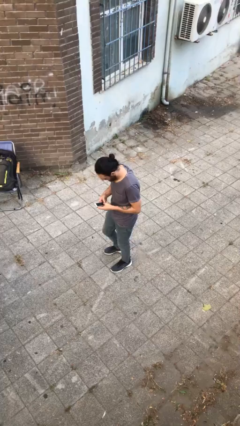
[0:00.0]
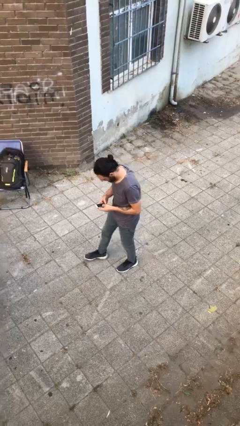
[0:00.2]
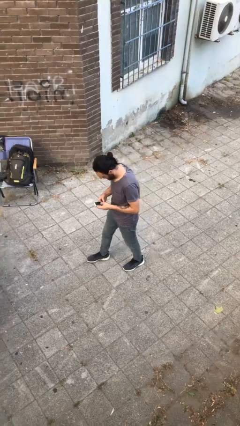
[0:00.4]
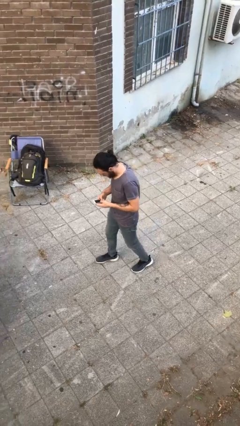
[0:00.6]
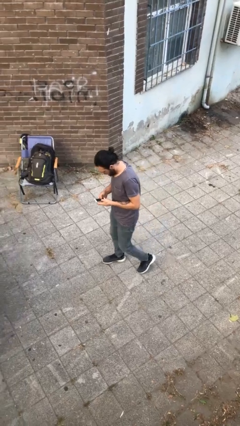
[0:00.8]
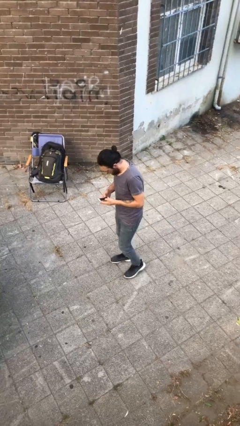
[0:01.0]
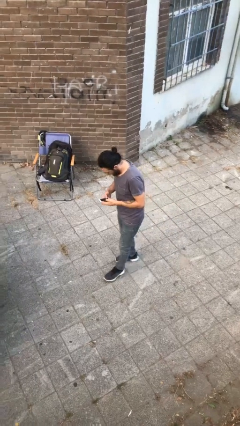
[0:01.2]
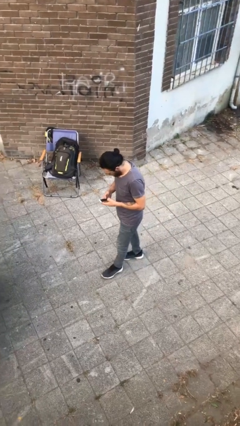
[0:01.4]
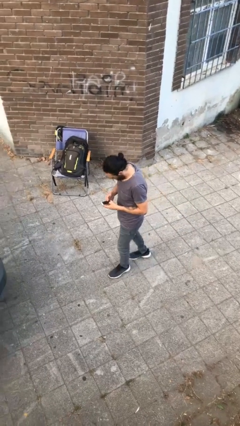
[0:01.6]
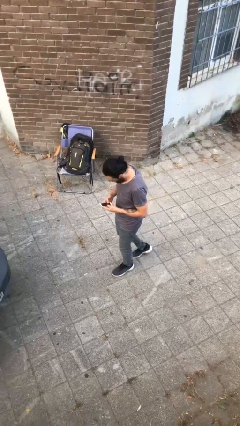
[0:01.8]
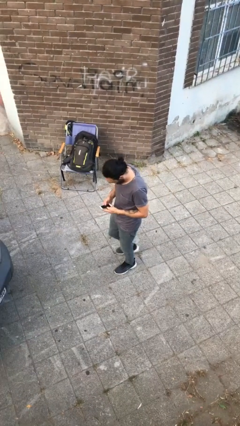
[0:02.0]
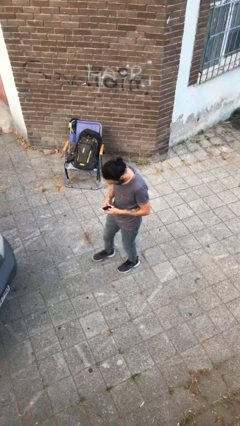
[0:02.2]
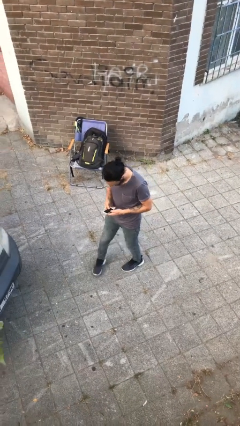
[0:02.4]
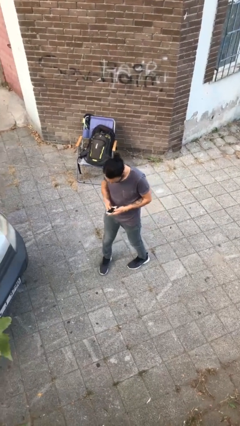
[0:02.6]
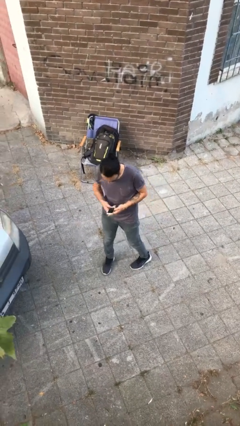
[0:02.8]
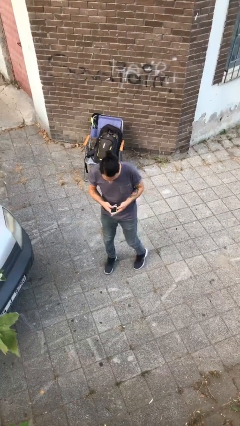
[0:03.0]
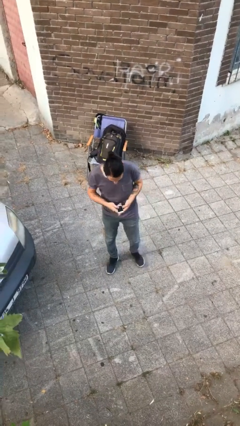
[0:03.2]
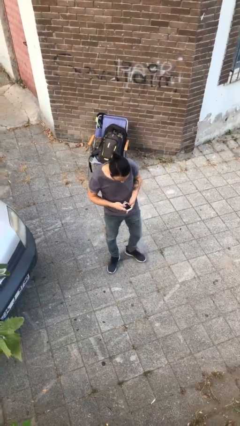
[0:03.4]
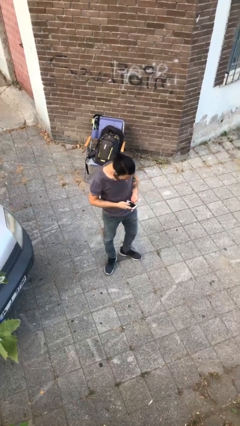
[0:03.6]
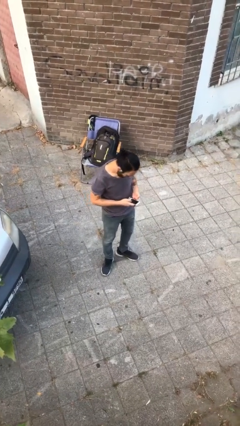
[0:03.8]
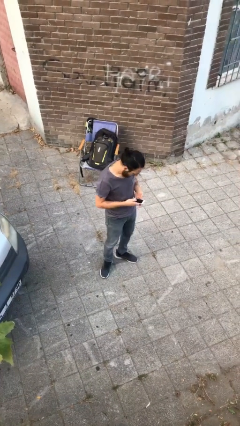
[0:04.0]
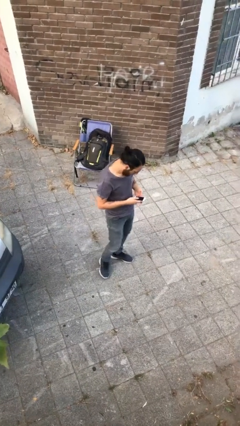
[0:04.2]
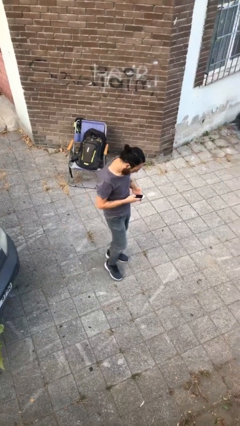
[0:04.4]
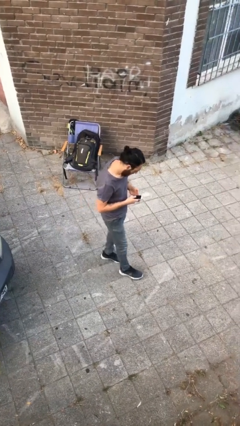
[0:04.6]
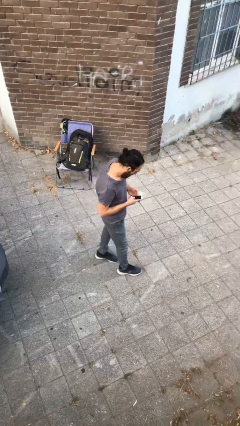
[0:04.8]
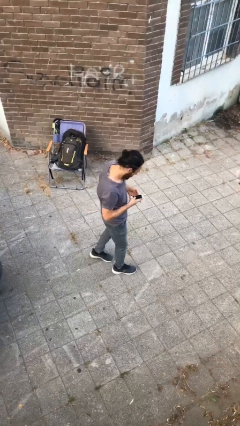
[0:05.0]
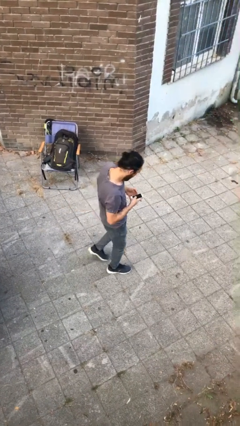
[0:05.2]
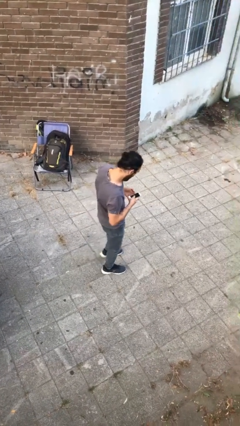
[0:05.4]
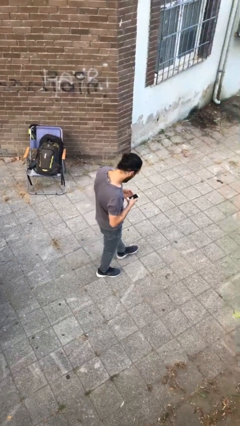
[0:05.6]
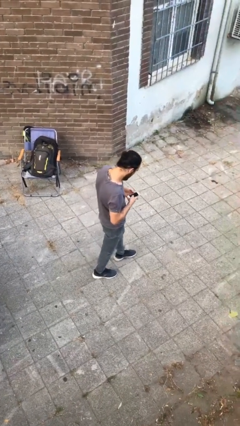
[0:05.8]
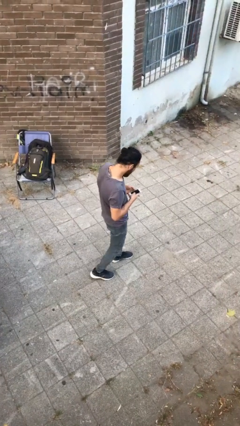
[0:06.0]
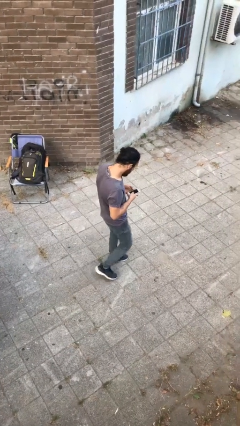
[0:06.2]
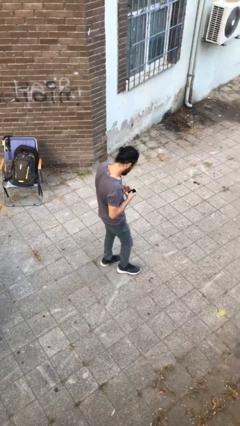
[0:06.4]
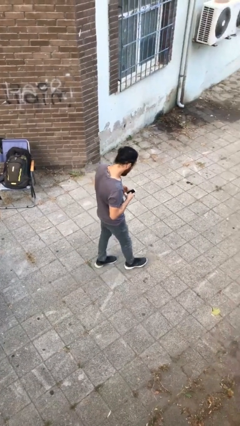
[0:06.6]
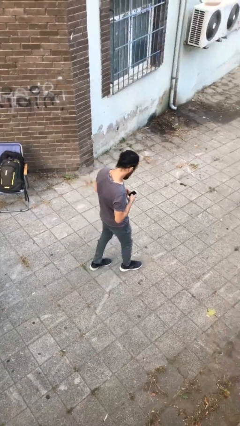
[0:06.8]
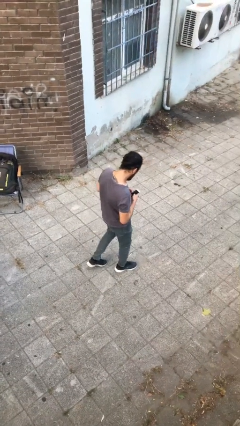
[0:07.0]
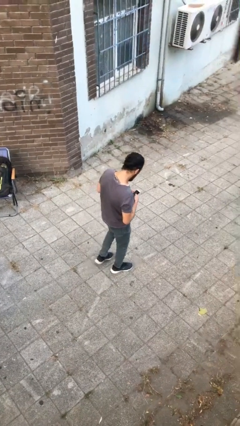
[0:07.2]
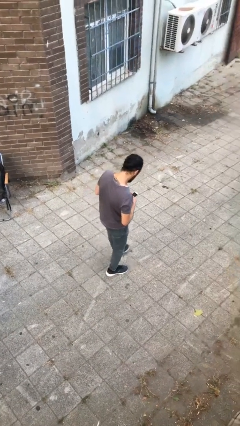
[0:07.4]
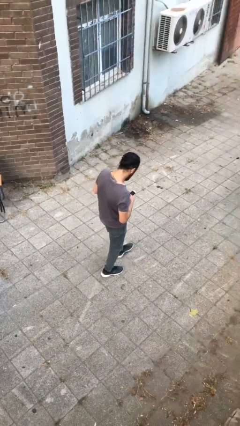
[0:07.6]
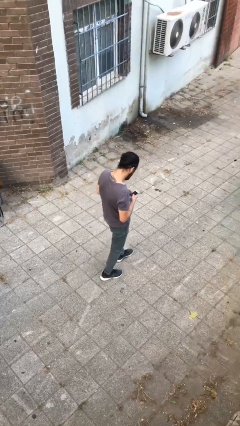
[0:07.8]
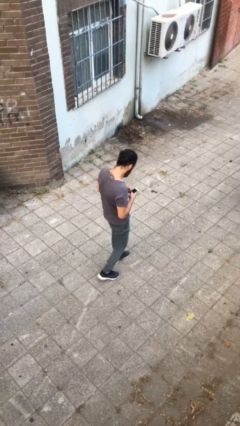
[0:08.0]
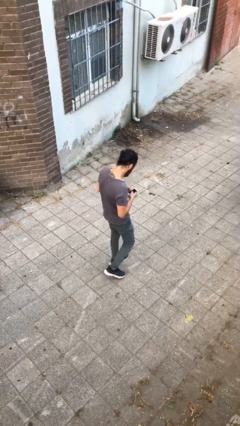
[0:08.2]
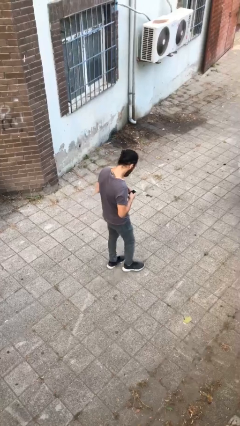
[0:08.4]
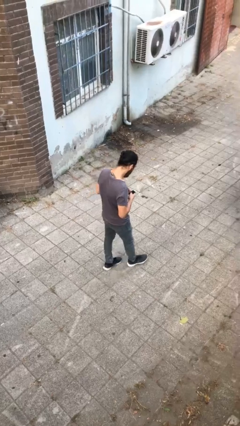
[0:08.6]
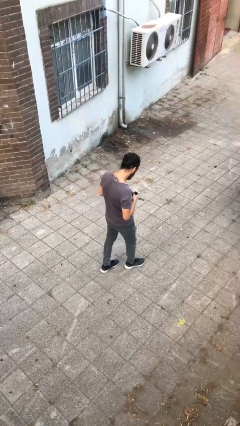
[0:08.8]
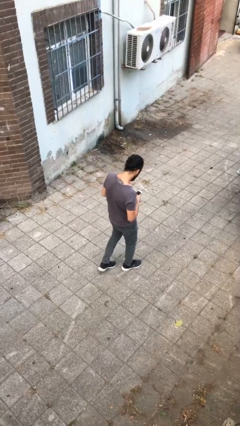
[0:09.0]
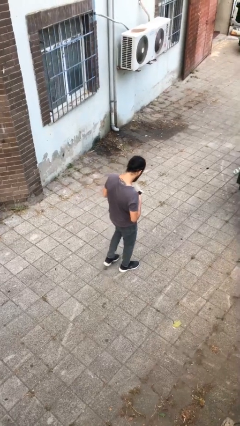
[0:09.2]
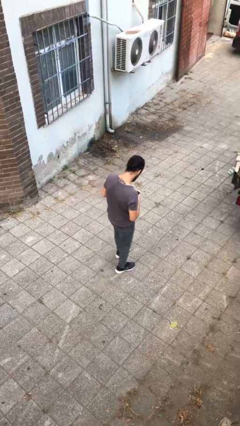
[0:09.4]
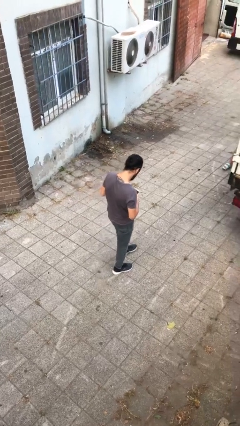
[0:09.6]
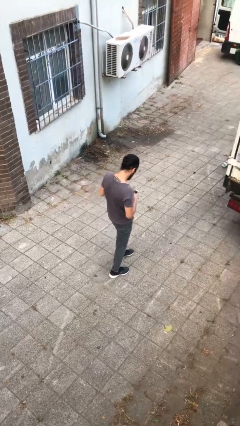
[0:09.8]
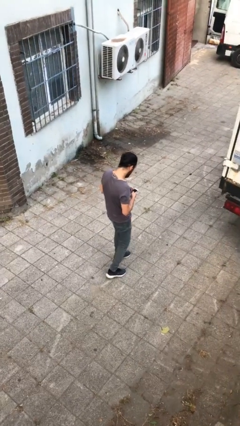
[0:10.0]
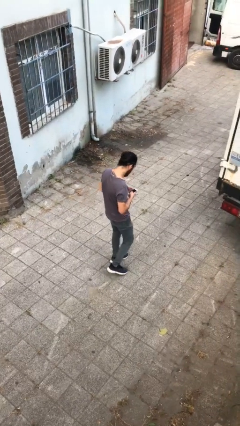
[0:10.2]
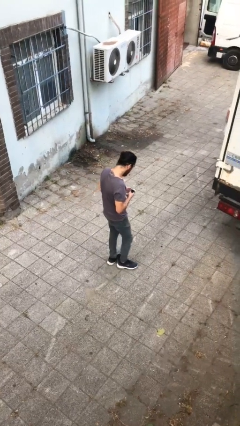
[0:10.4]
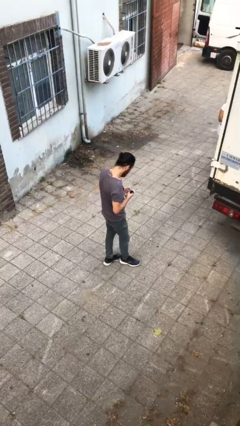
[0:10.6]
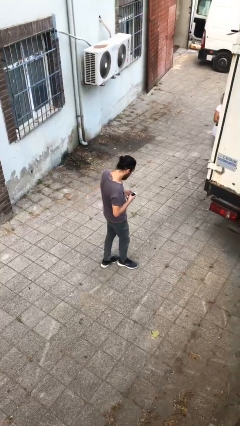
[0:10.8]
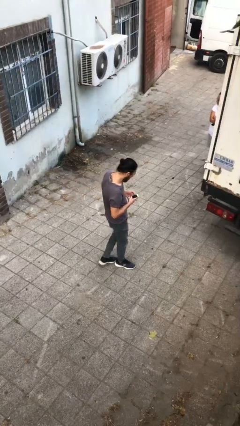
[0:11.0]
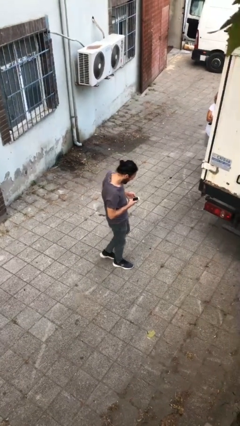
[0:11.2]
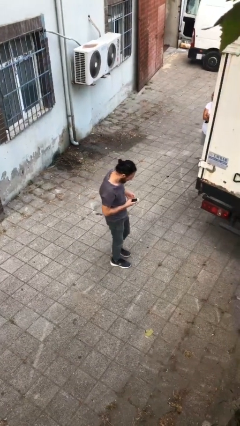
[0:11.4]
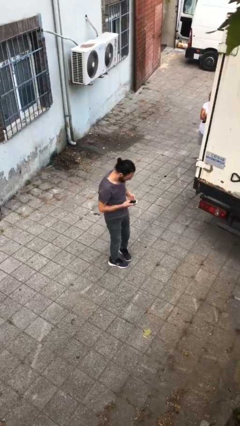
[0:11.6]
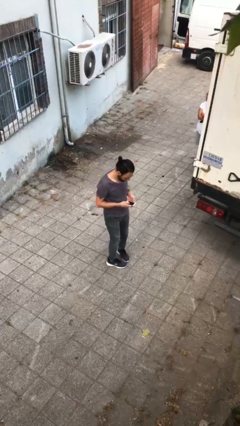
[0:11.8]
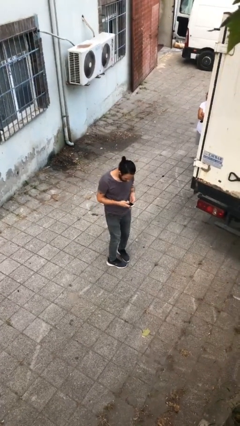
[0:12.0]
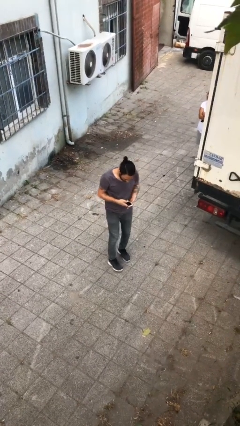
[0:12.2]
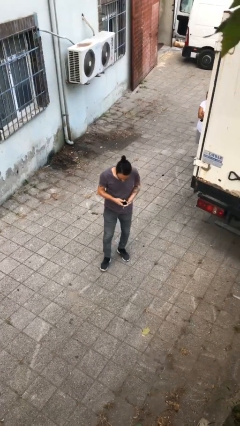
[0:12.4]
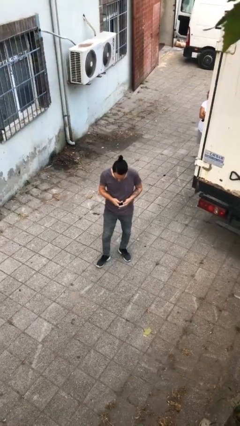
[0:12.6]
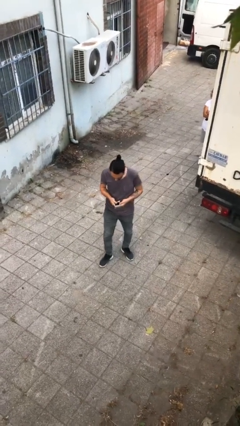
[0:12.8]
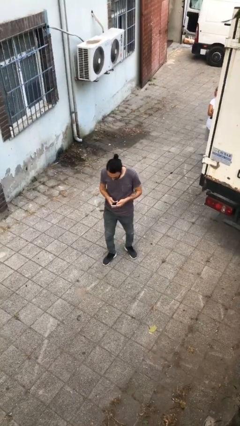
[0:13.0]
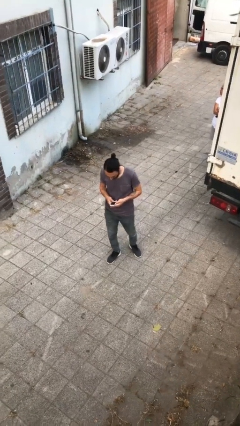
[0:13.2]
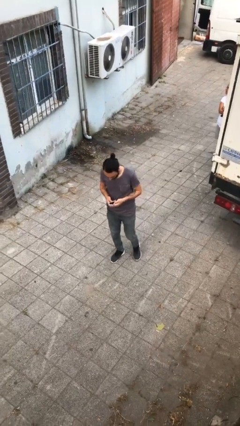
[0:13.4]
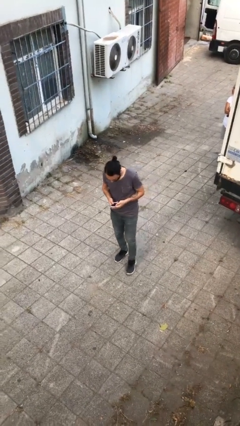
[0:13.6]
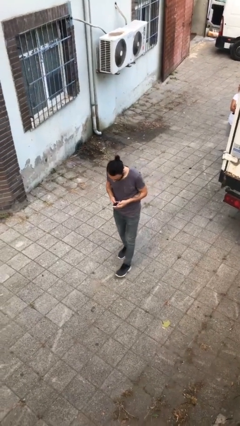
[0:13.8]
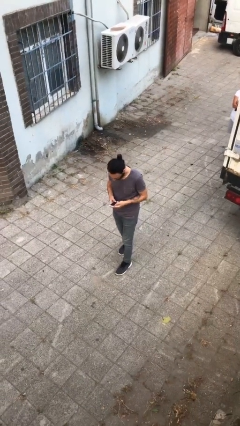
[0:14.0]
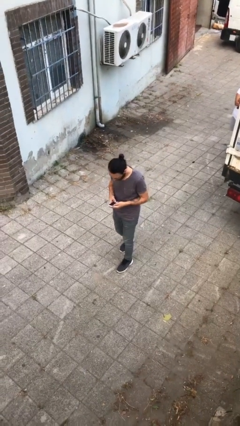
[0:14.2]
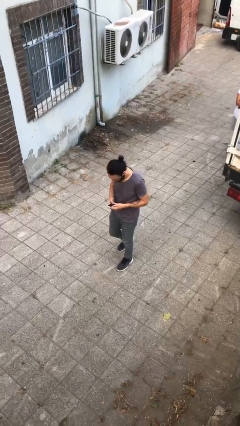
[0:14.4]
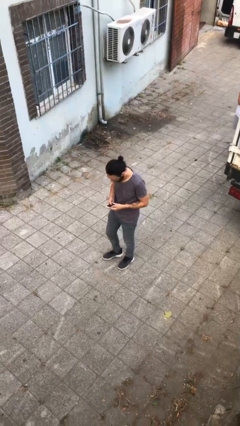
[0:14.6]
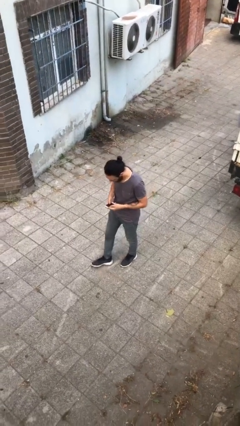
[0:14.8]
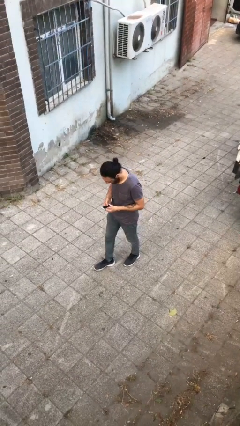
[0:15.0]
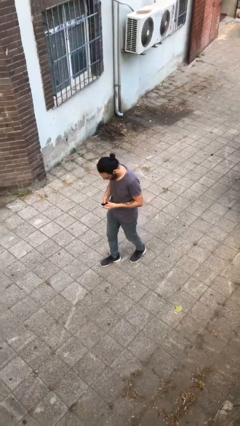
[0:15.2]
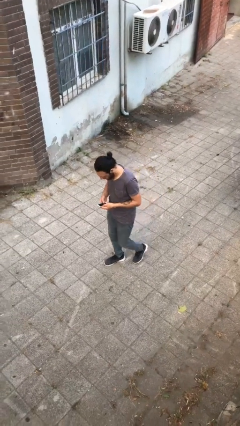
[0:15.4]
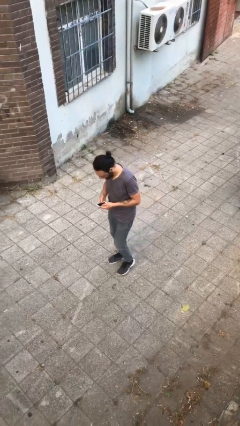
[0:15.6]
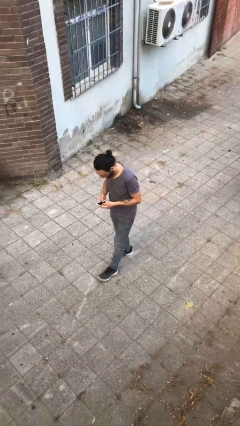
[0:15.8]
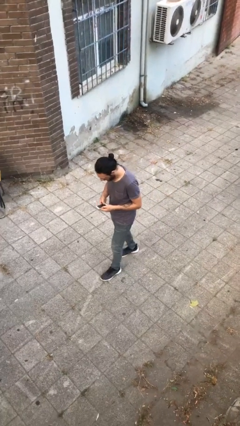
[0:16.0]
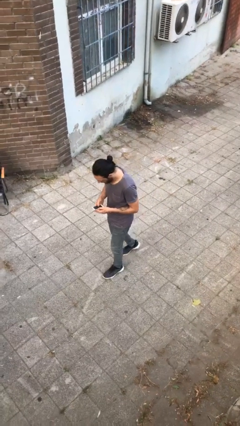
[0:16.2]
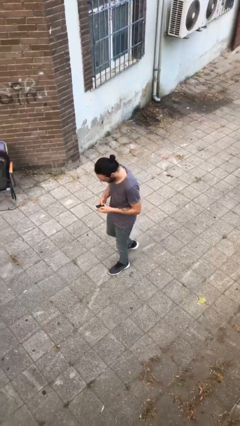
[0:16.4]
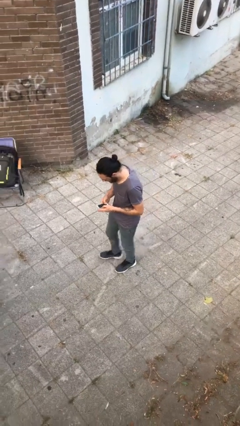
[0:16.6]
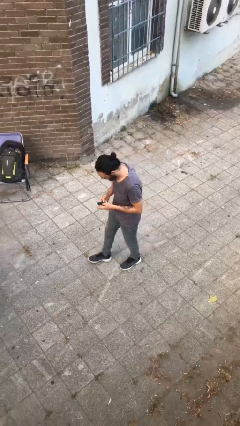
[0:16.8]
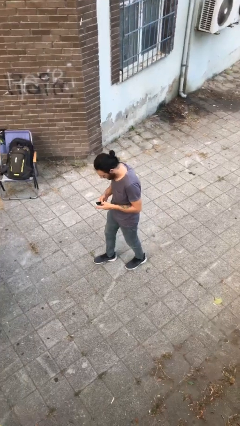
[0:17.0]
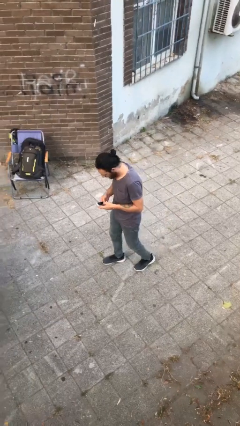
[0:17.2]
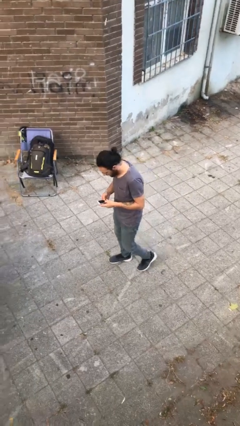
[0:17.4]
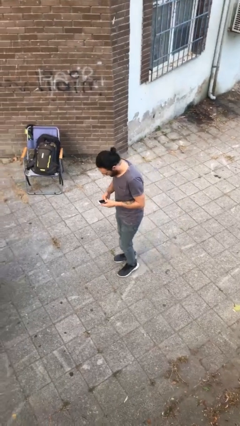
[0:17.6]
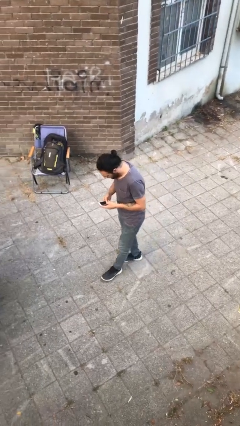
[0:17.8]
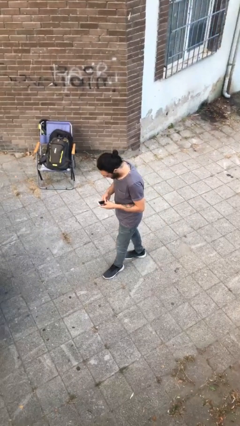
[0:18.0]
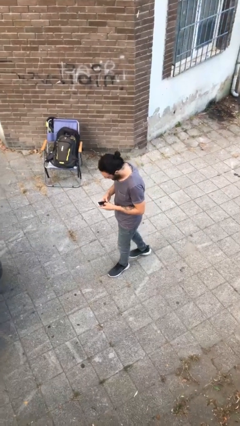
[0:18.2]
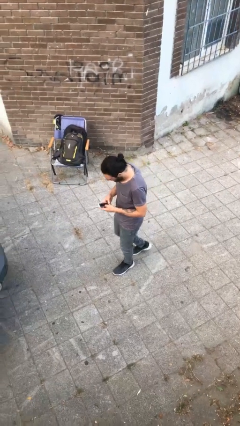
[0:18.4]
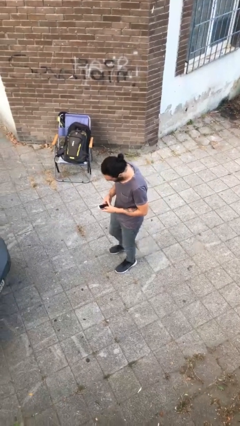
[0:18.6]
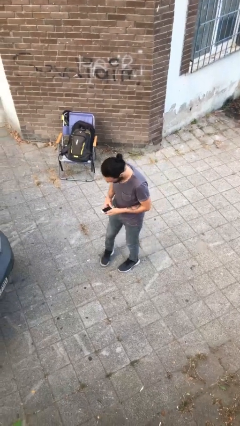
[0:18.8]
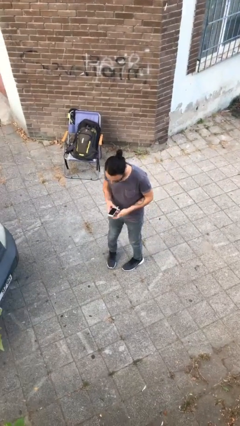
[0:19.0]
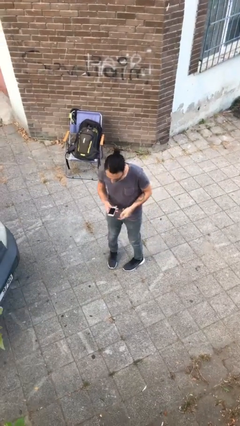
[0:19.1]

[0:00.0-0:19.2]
person texts on phone
